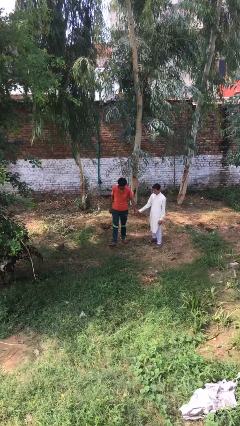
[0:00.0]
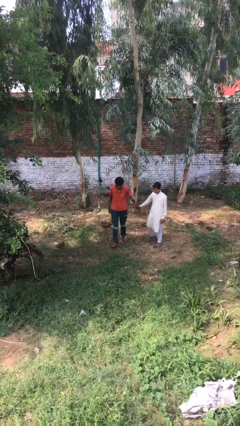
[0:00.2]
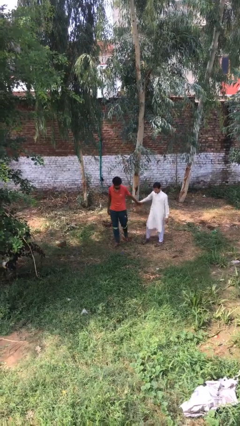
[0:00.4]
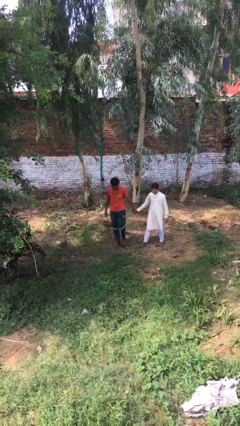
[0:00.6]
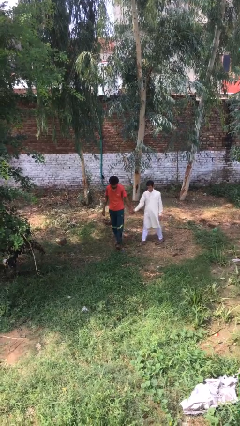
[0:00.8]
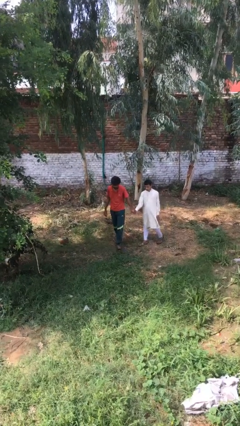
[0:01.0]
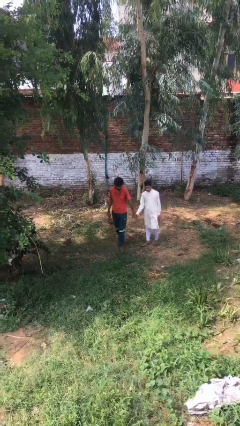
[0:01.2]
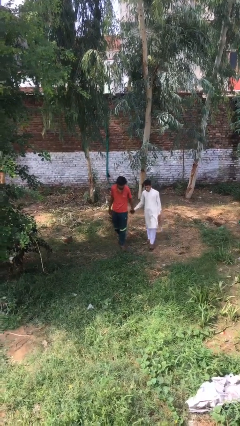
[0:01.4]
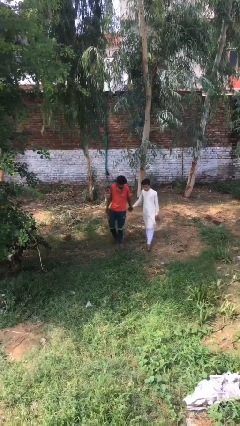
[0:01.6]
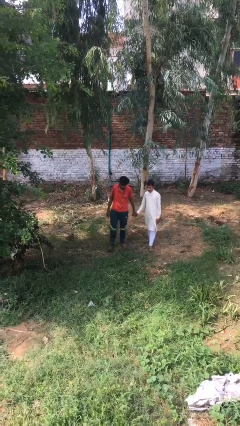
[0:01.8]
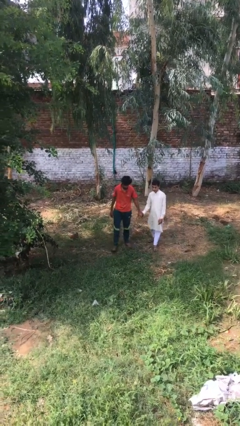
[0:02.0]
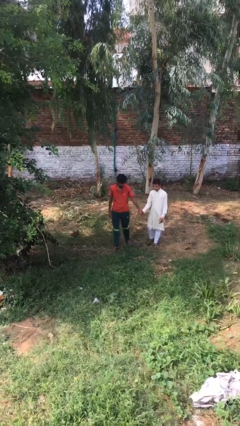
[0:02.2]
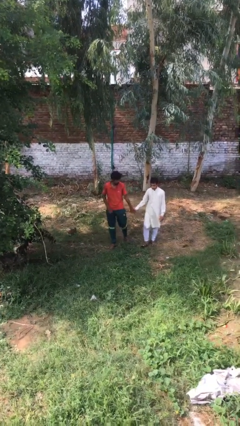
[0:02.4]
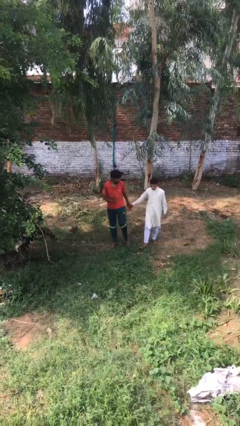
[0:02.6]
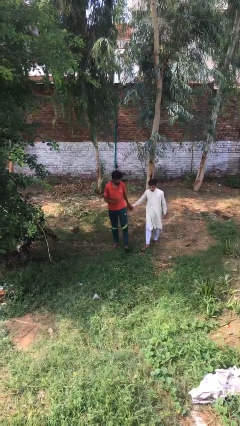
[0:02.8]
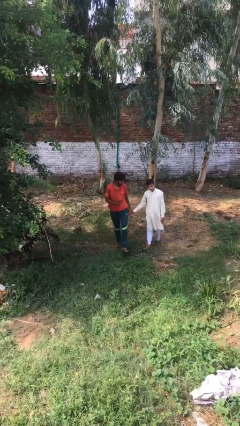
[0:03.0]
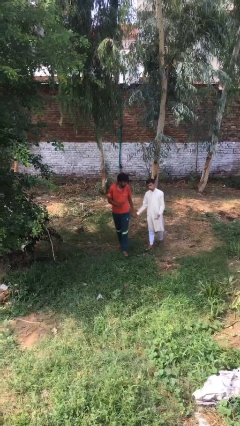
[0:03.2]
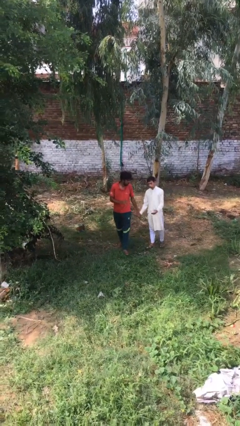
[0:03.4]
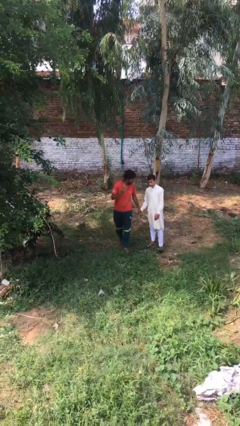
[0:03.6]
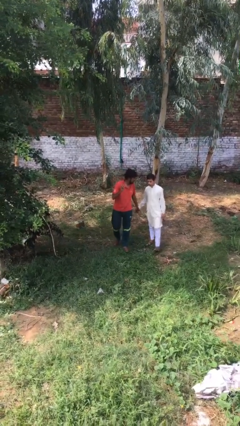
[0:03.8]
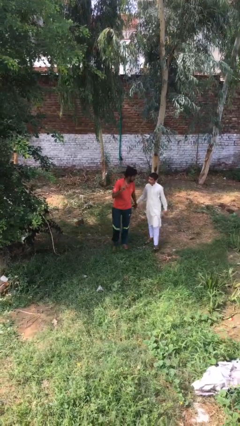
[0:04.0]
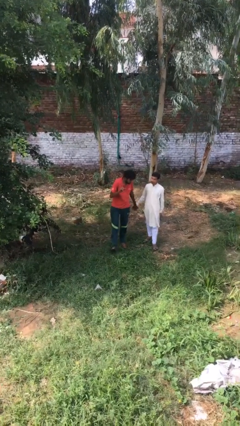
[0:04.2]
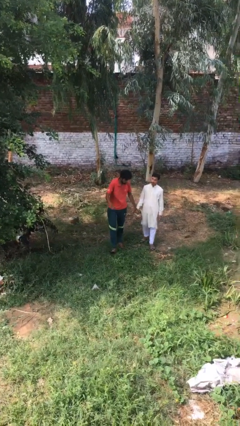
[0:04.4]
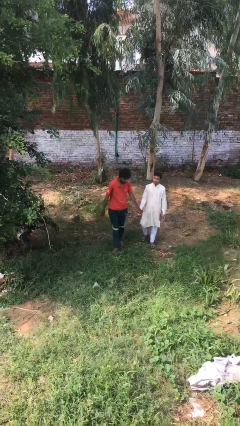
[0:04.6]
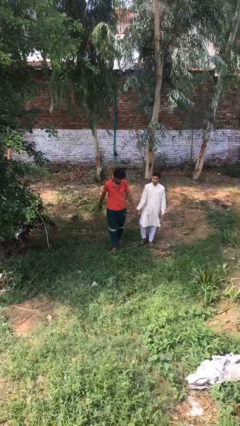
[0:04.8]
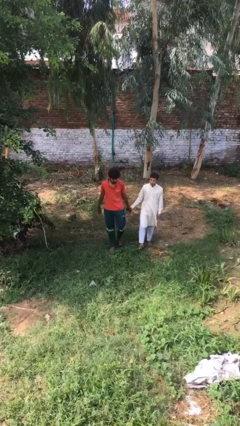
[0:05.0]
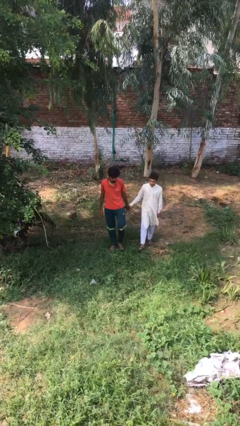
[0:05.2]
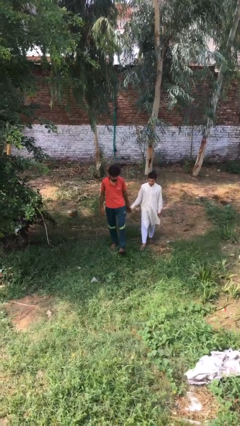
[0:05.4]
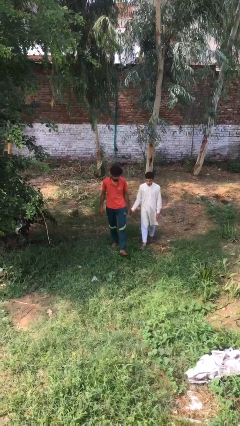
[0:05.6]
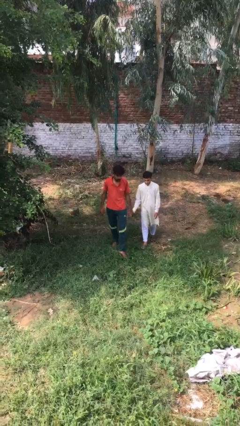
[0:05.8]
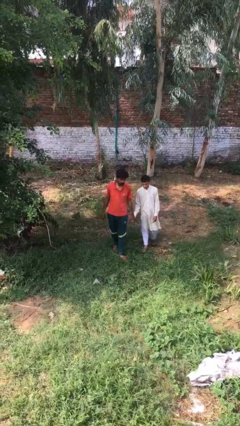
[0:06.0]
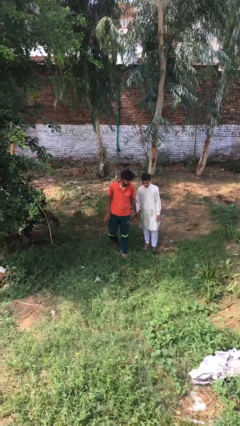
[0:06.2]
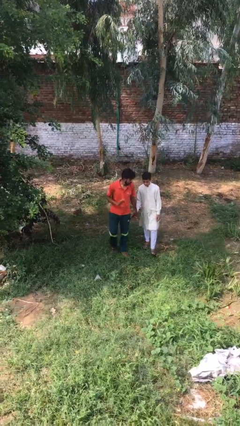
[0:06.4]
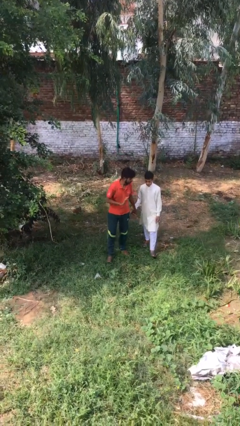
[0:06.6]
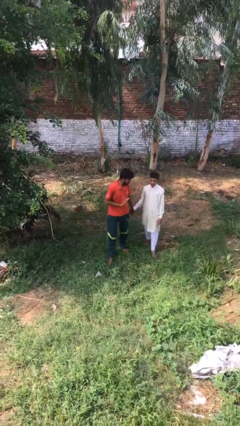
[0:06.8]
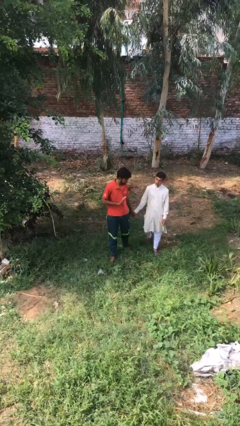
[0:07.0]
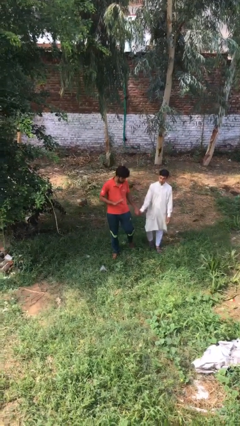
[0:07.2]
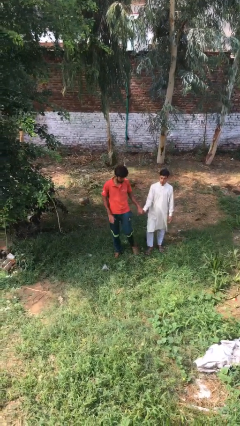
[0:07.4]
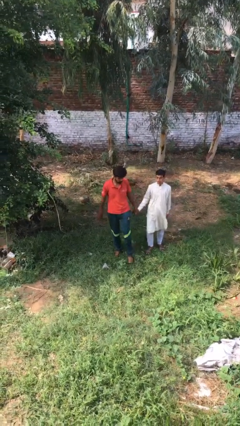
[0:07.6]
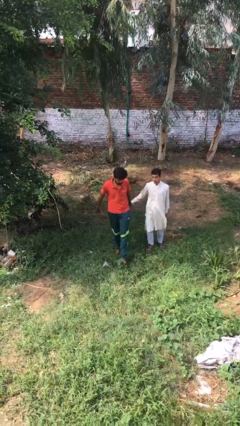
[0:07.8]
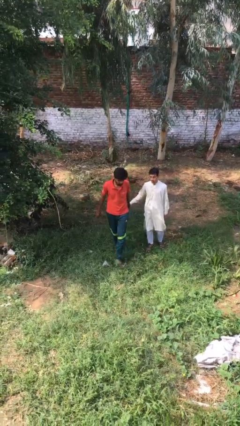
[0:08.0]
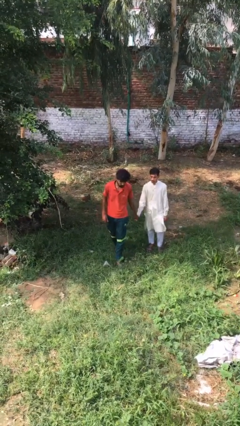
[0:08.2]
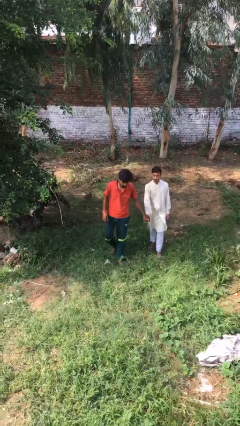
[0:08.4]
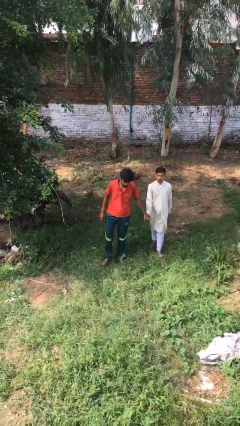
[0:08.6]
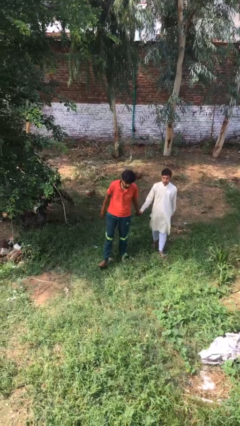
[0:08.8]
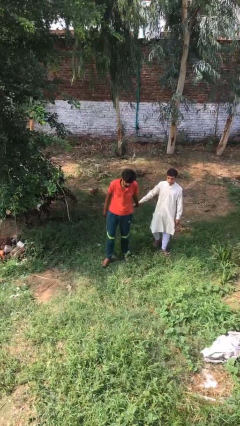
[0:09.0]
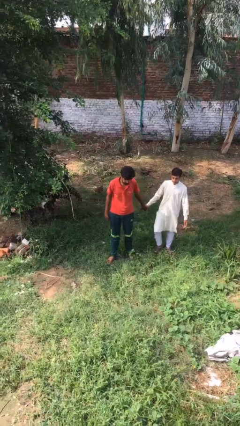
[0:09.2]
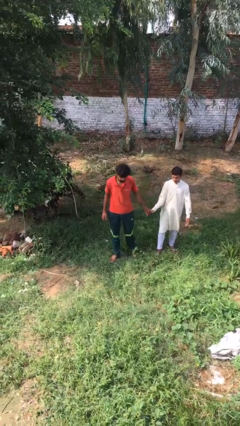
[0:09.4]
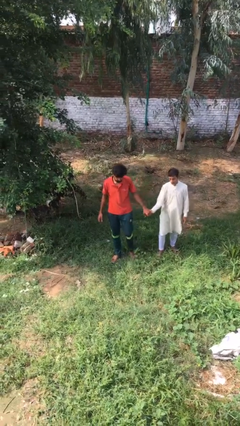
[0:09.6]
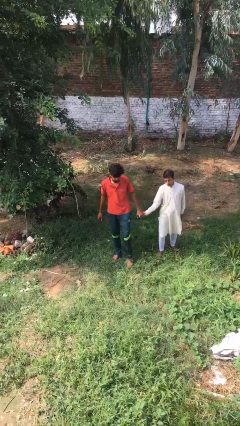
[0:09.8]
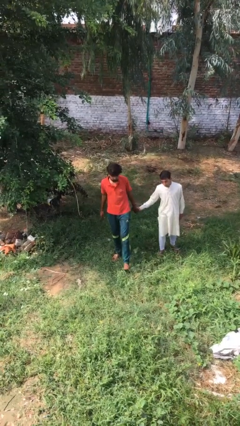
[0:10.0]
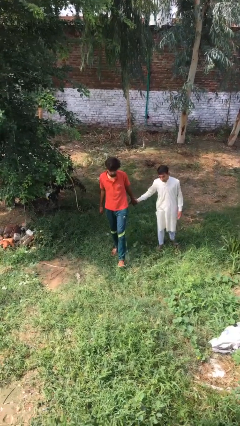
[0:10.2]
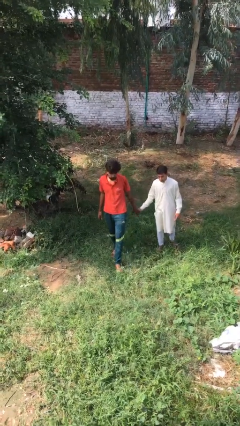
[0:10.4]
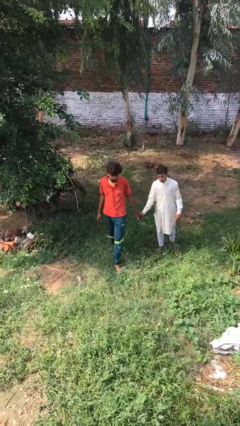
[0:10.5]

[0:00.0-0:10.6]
person holds hand

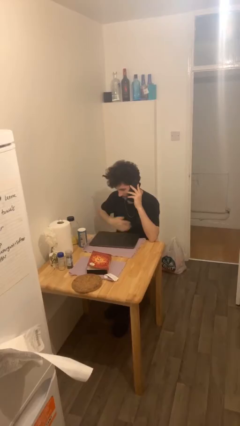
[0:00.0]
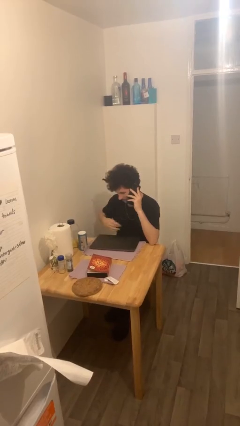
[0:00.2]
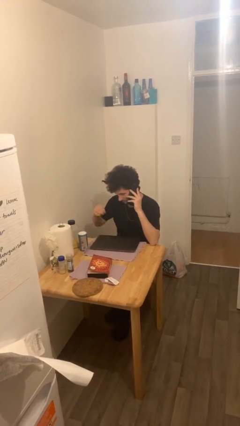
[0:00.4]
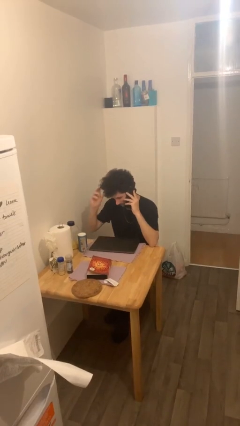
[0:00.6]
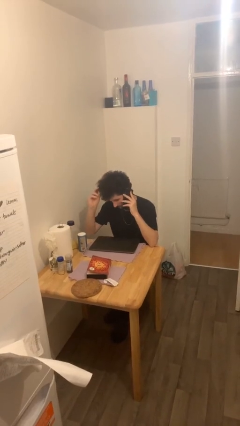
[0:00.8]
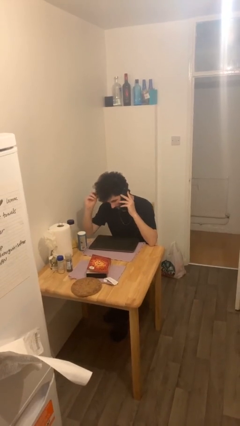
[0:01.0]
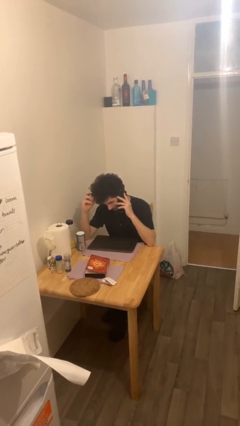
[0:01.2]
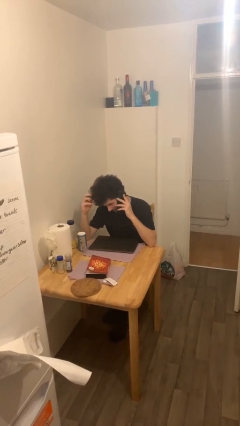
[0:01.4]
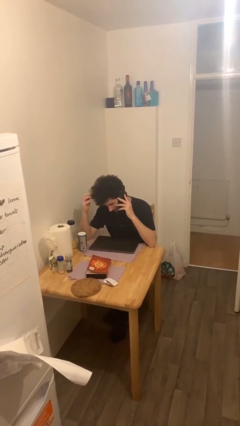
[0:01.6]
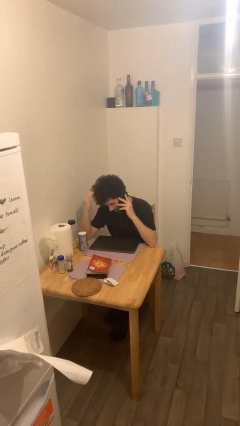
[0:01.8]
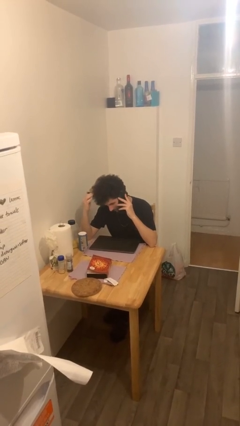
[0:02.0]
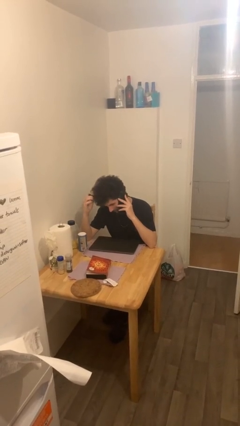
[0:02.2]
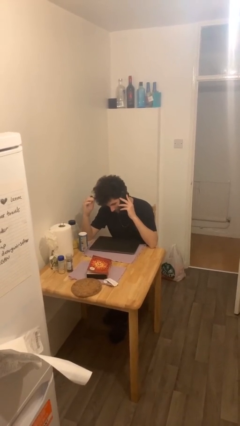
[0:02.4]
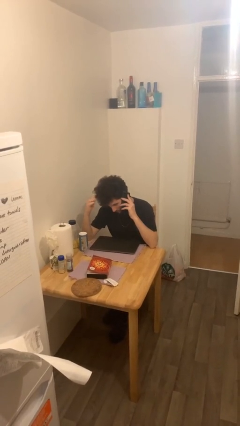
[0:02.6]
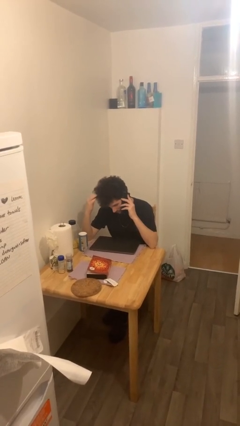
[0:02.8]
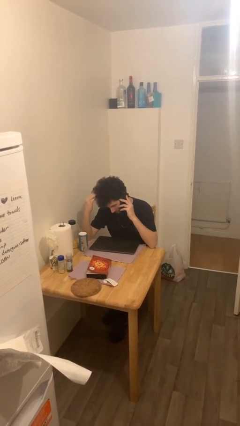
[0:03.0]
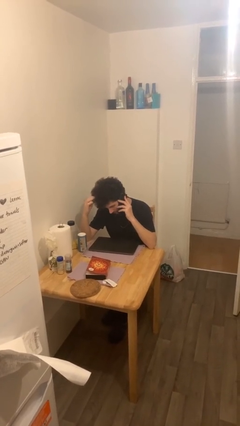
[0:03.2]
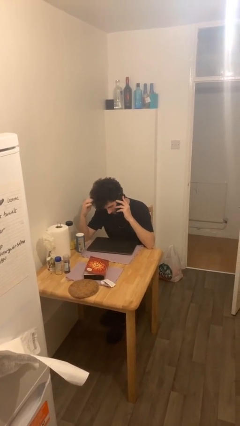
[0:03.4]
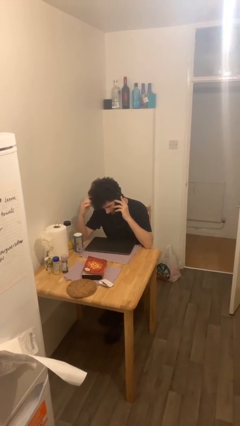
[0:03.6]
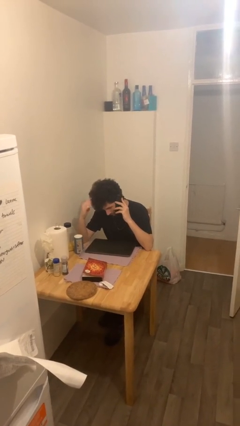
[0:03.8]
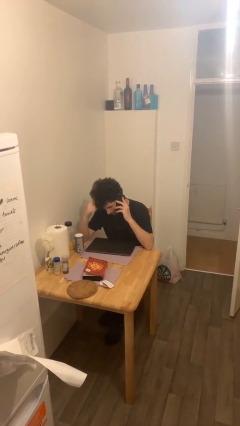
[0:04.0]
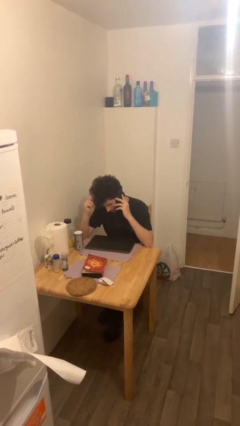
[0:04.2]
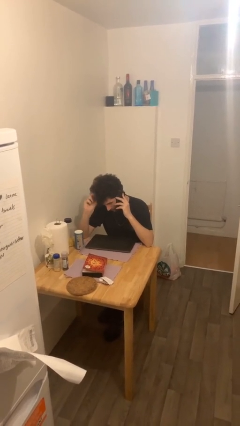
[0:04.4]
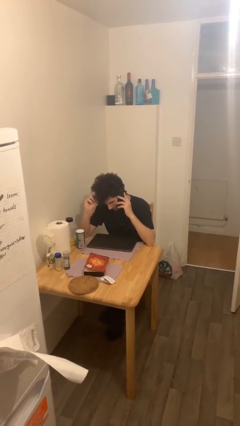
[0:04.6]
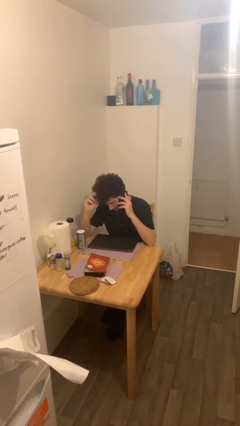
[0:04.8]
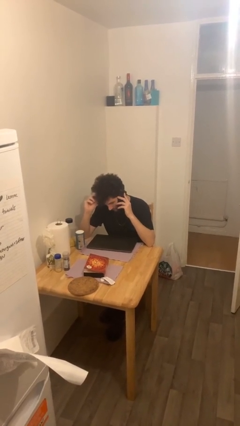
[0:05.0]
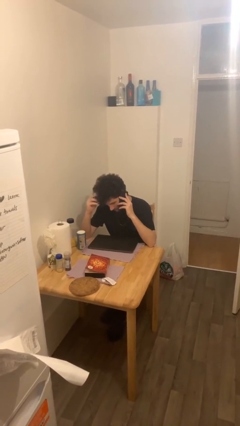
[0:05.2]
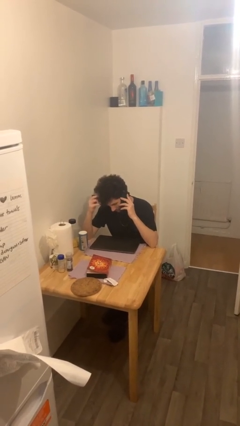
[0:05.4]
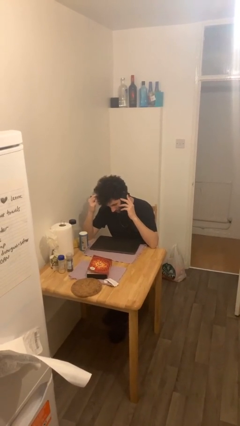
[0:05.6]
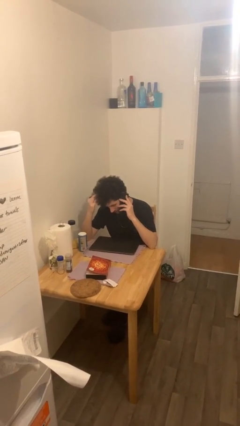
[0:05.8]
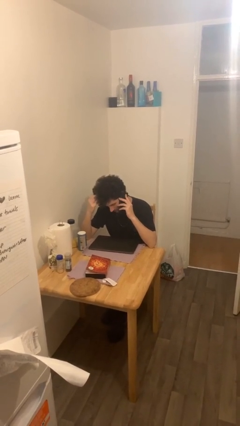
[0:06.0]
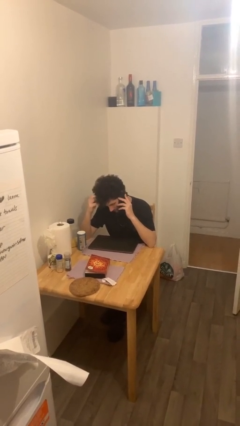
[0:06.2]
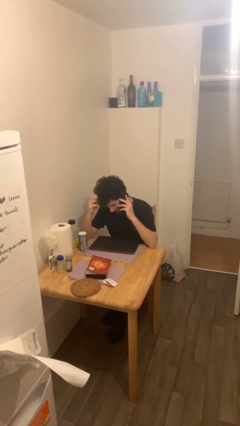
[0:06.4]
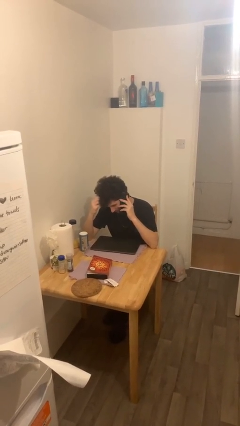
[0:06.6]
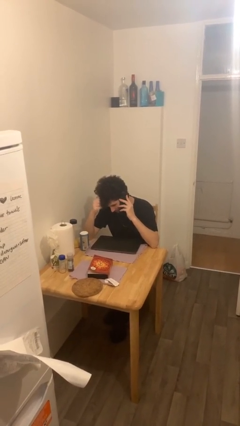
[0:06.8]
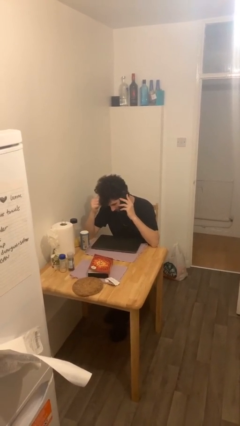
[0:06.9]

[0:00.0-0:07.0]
person talks on phone

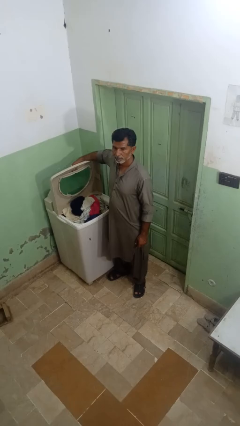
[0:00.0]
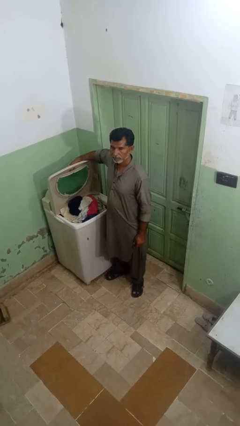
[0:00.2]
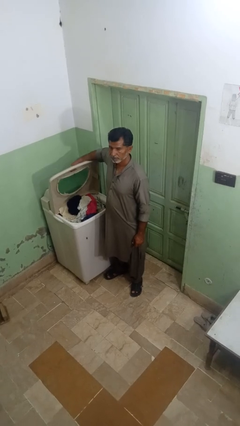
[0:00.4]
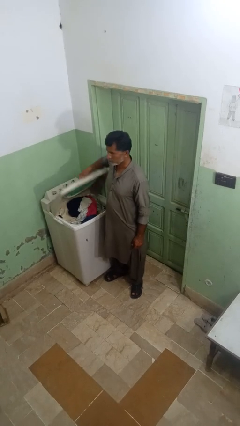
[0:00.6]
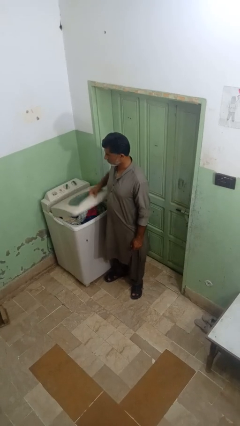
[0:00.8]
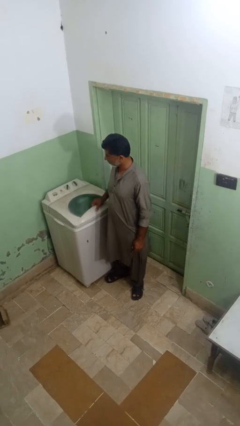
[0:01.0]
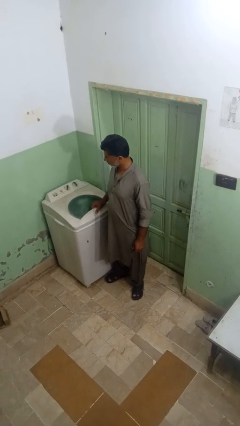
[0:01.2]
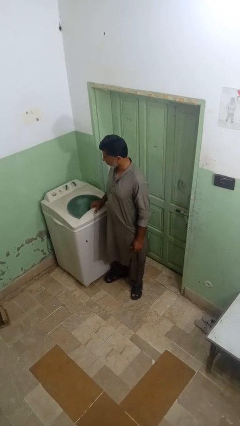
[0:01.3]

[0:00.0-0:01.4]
person closes clothes washer
